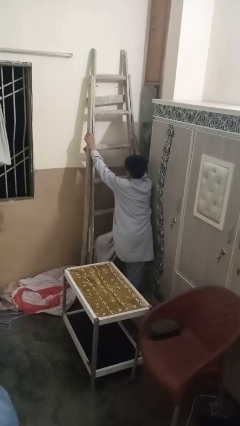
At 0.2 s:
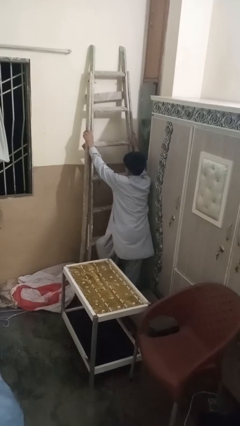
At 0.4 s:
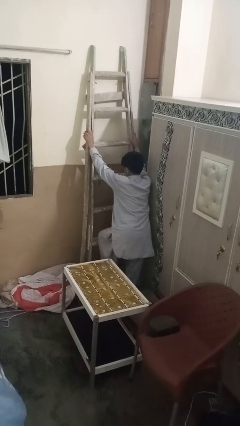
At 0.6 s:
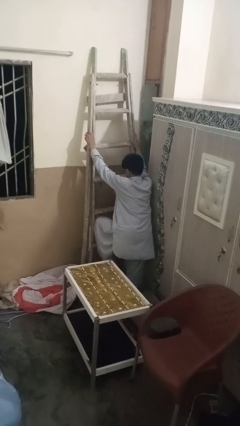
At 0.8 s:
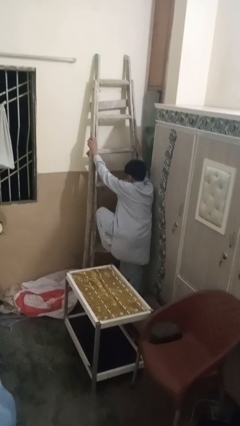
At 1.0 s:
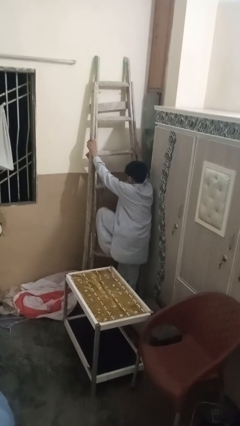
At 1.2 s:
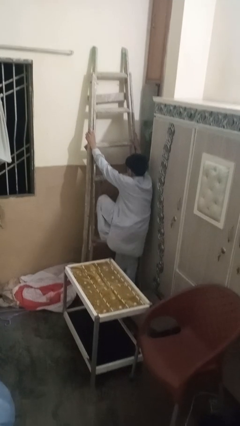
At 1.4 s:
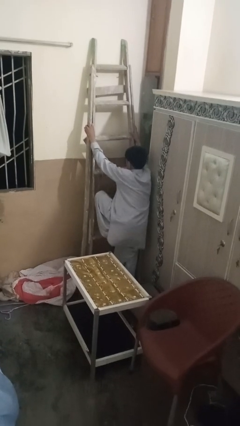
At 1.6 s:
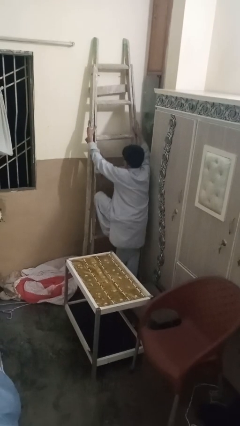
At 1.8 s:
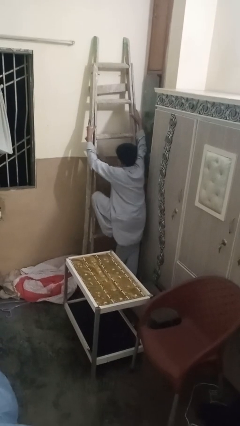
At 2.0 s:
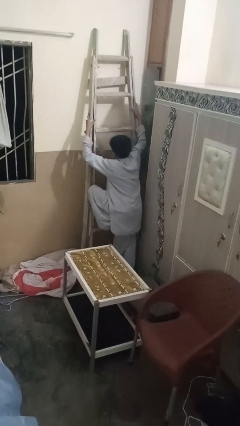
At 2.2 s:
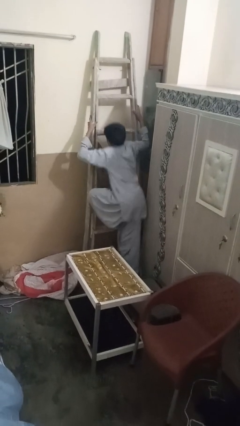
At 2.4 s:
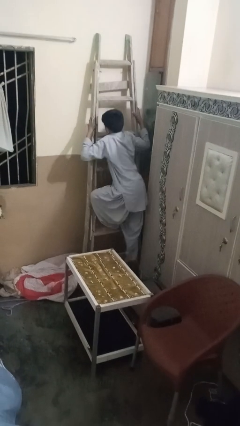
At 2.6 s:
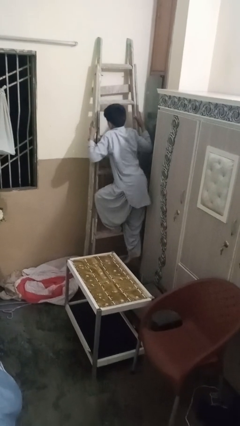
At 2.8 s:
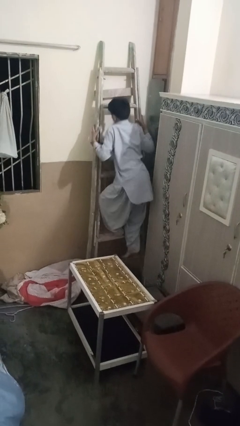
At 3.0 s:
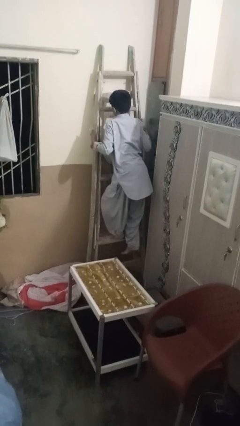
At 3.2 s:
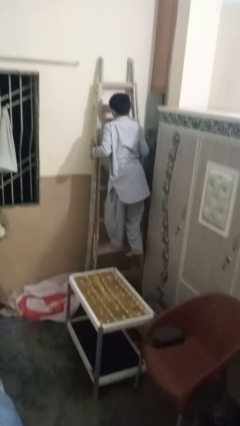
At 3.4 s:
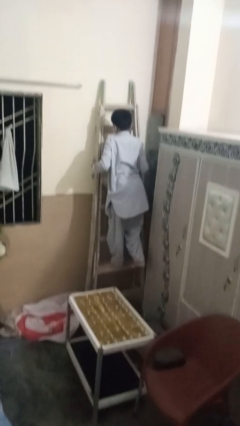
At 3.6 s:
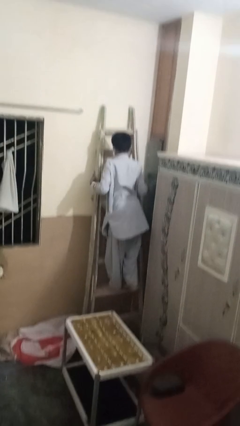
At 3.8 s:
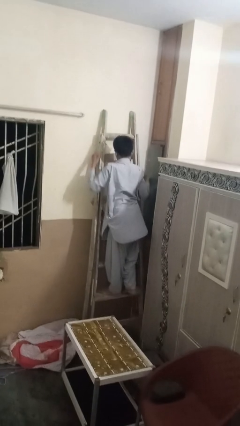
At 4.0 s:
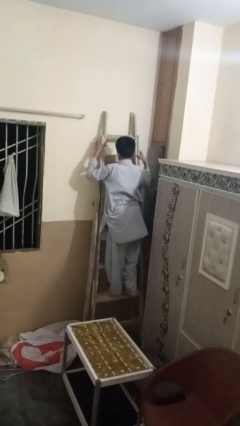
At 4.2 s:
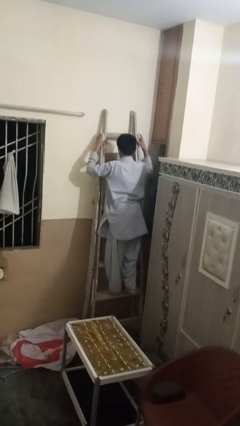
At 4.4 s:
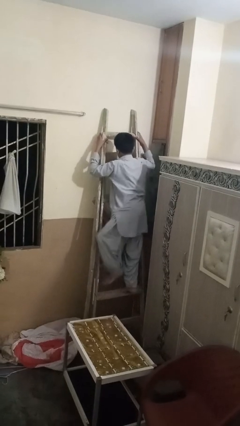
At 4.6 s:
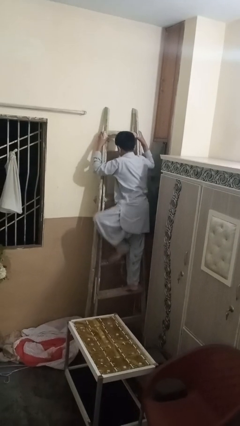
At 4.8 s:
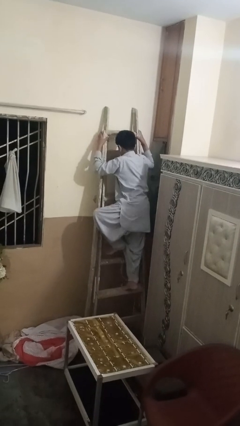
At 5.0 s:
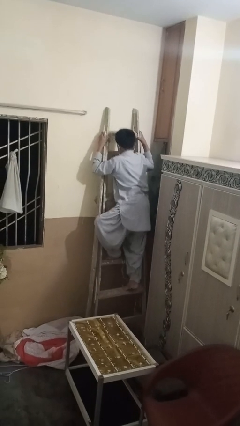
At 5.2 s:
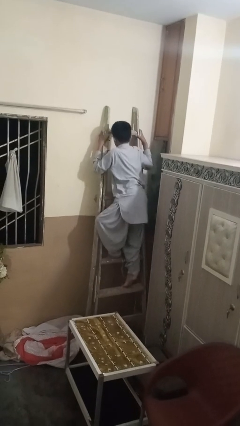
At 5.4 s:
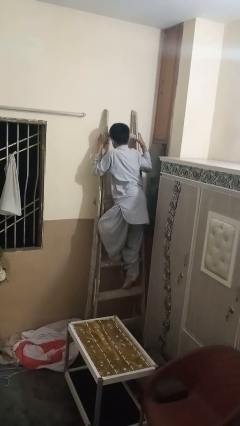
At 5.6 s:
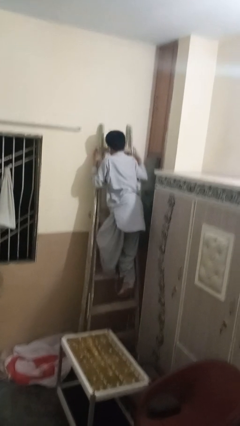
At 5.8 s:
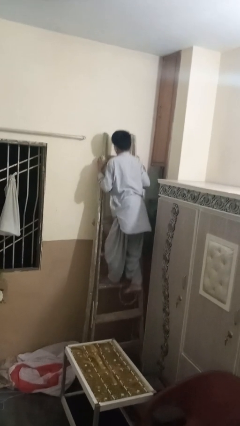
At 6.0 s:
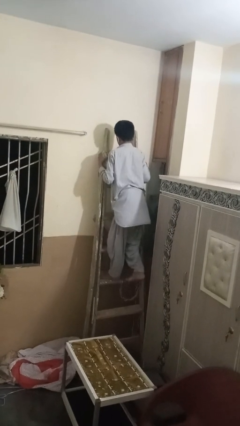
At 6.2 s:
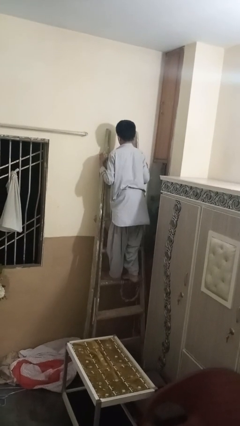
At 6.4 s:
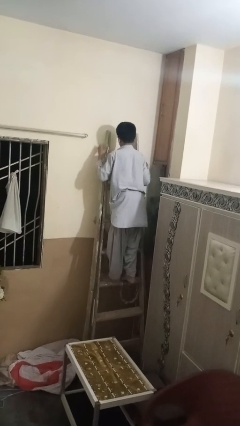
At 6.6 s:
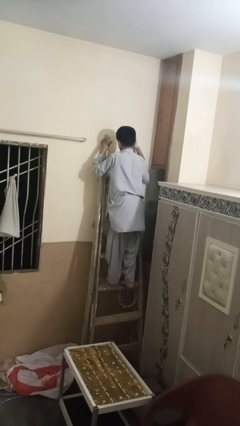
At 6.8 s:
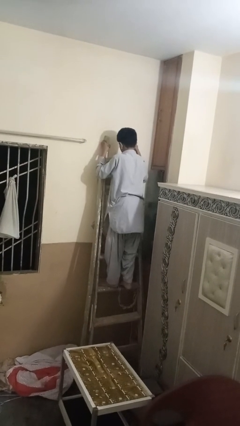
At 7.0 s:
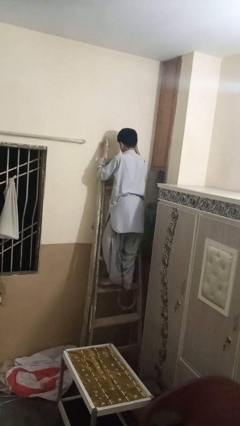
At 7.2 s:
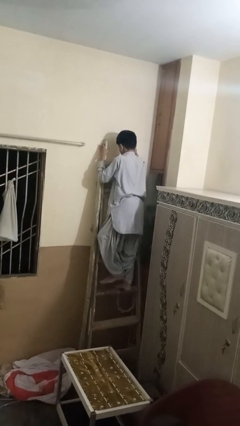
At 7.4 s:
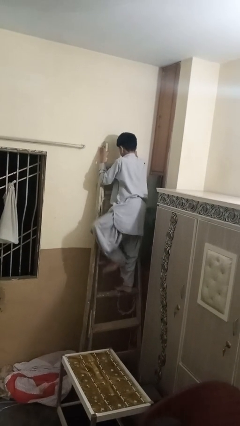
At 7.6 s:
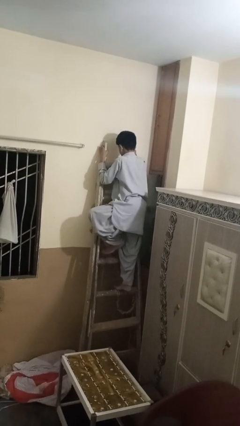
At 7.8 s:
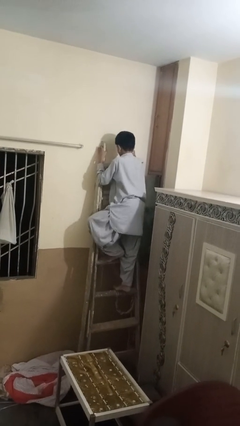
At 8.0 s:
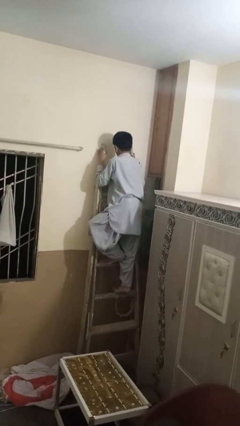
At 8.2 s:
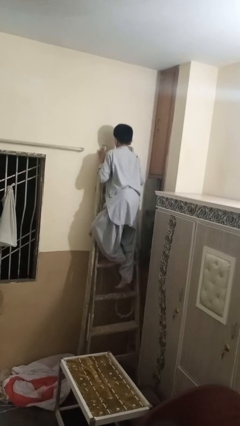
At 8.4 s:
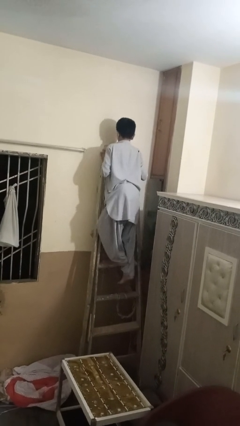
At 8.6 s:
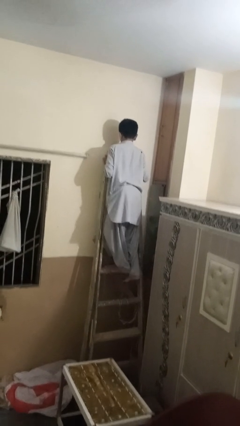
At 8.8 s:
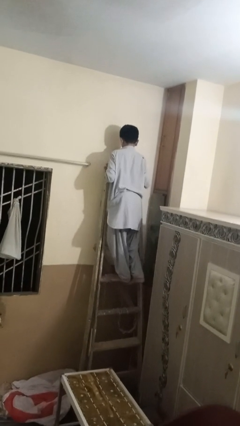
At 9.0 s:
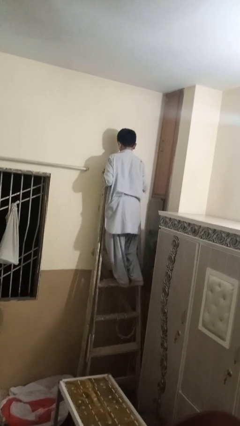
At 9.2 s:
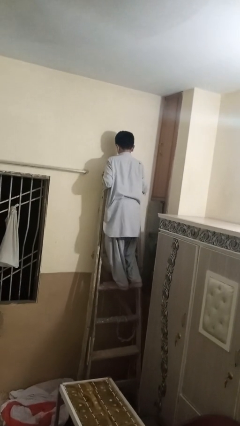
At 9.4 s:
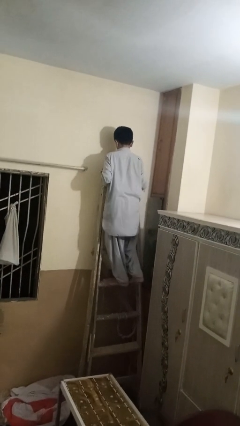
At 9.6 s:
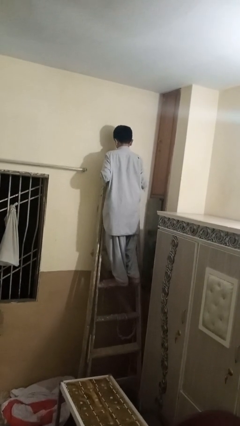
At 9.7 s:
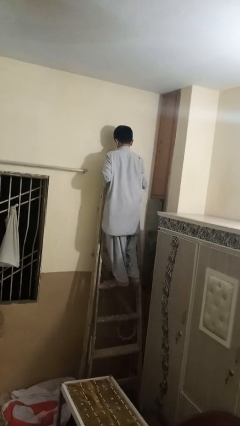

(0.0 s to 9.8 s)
person climbs up ladder

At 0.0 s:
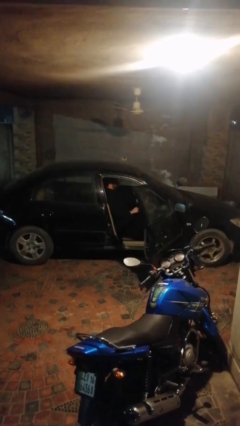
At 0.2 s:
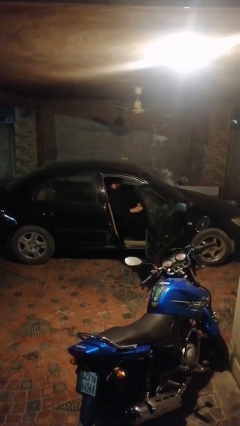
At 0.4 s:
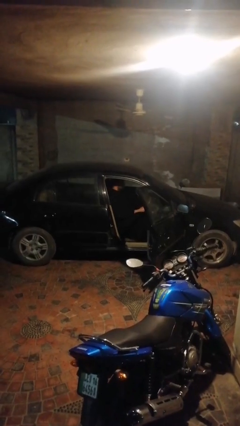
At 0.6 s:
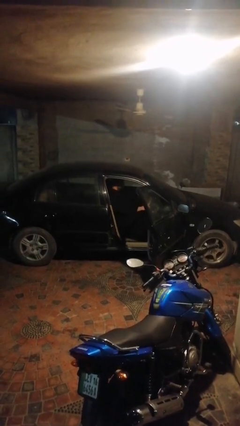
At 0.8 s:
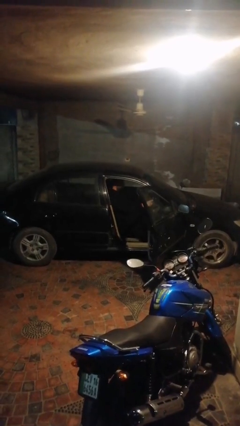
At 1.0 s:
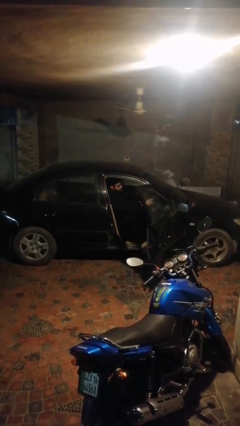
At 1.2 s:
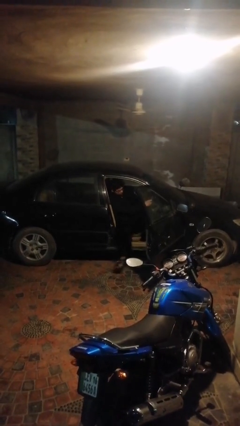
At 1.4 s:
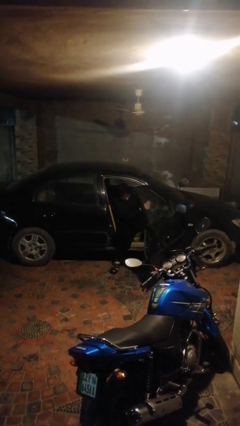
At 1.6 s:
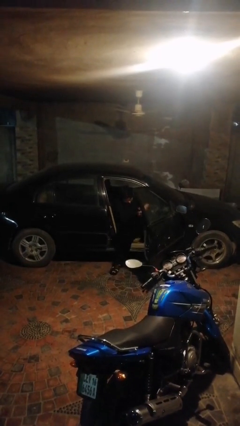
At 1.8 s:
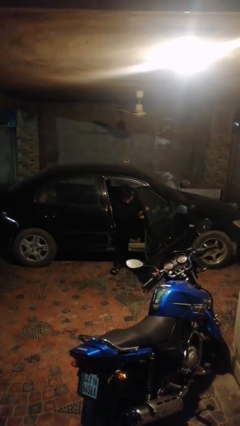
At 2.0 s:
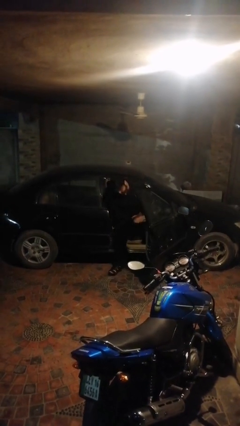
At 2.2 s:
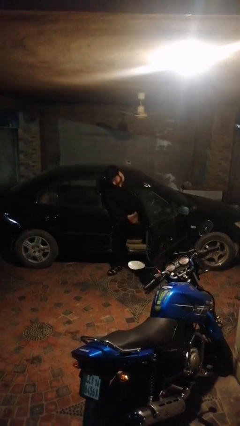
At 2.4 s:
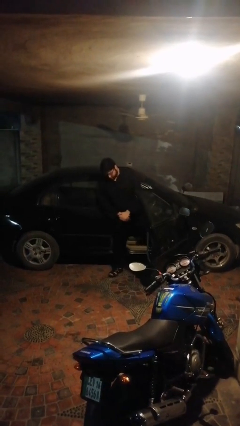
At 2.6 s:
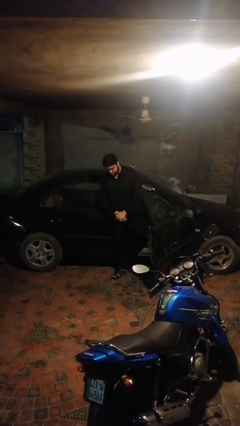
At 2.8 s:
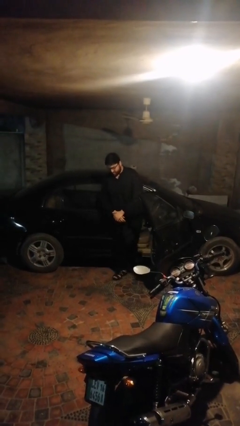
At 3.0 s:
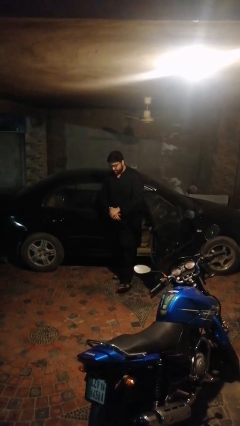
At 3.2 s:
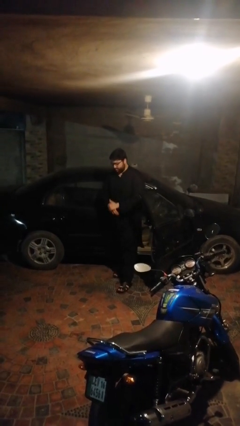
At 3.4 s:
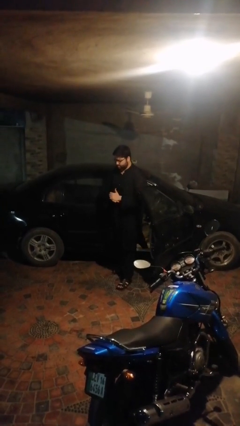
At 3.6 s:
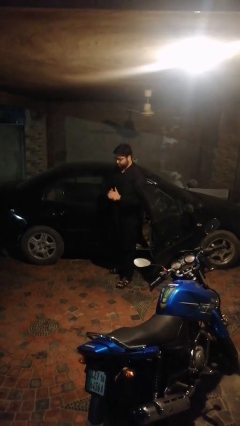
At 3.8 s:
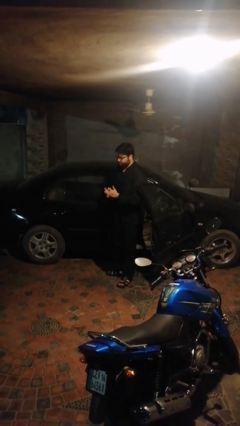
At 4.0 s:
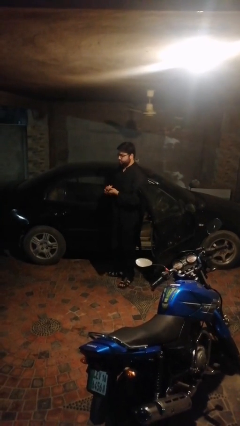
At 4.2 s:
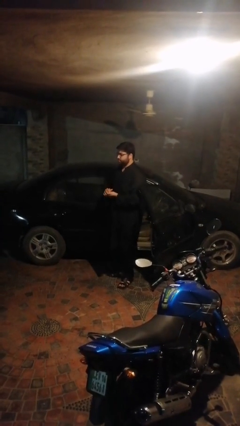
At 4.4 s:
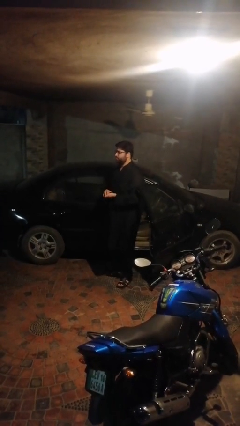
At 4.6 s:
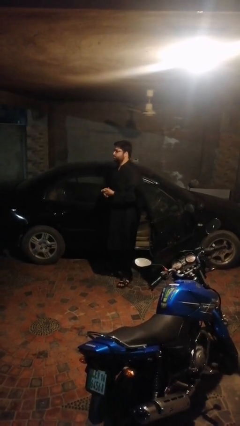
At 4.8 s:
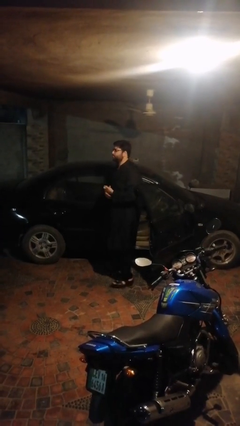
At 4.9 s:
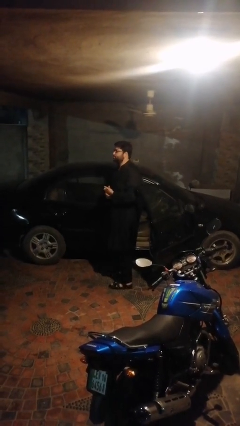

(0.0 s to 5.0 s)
person exits car

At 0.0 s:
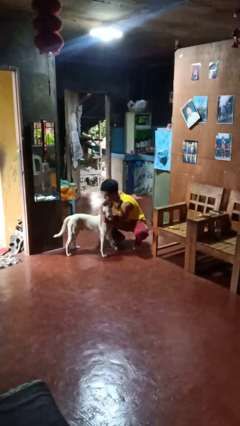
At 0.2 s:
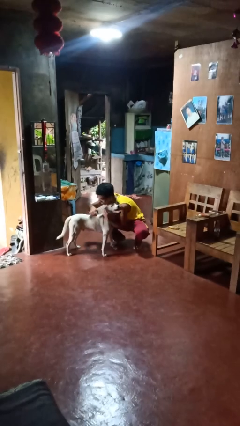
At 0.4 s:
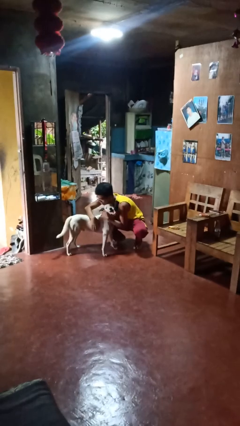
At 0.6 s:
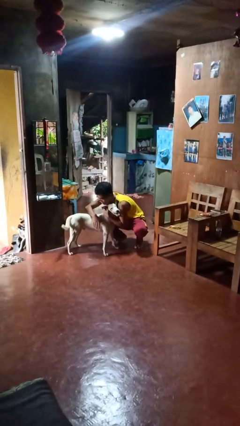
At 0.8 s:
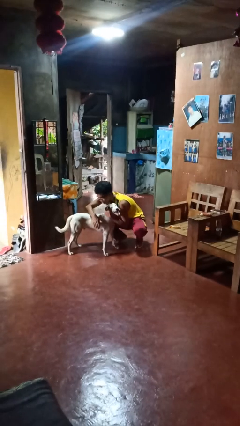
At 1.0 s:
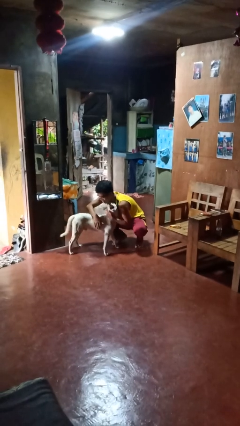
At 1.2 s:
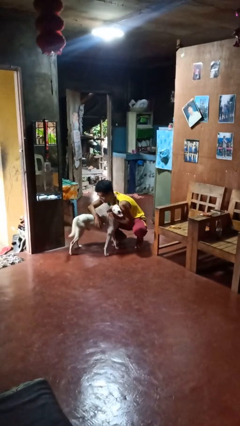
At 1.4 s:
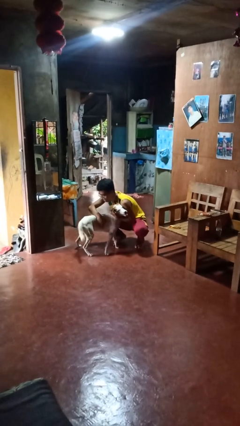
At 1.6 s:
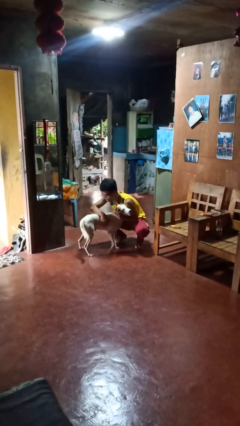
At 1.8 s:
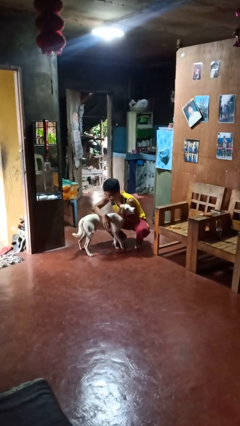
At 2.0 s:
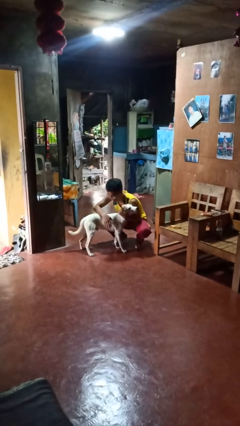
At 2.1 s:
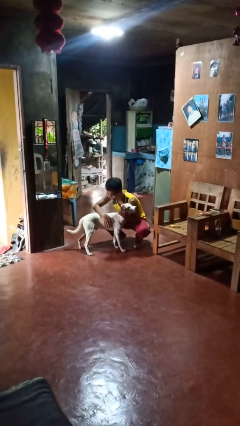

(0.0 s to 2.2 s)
person hugs dog

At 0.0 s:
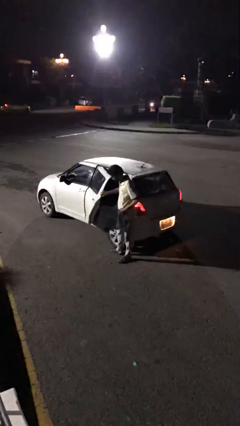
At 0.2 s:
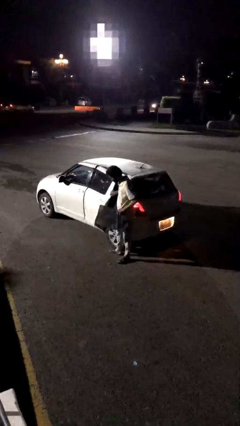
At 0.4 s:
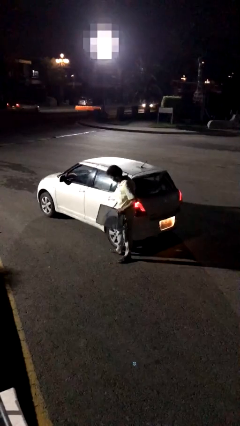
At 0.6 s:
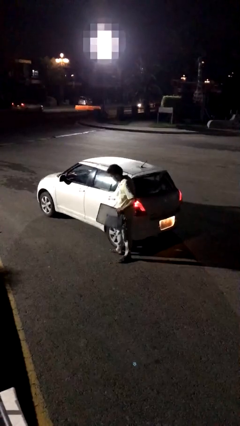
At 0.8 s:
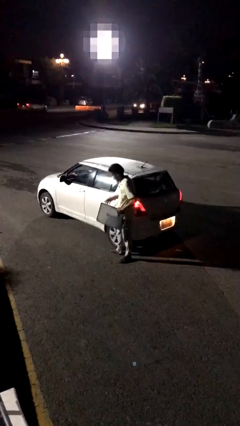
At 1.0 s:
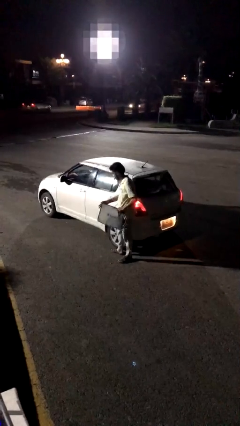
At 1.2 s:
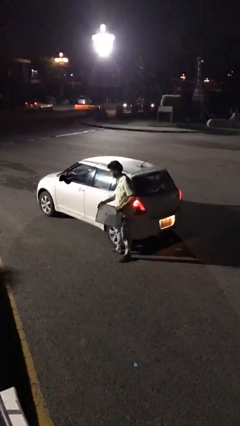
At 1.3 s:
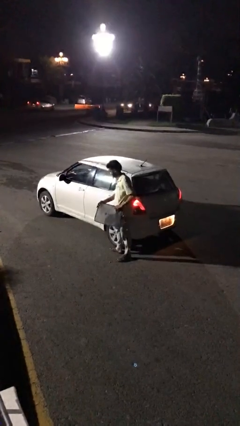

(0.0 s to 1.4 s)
person closes car door
